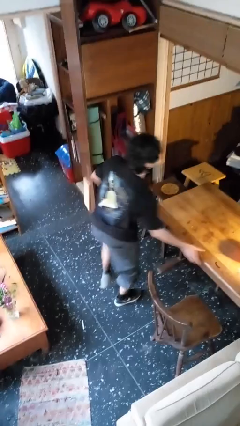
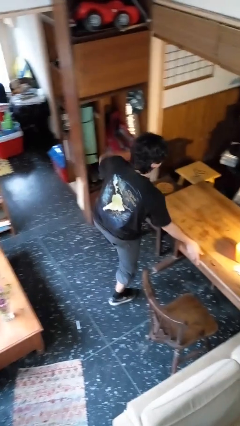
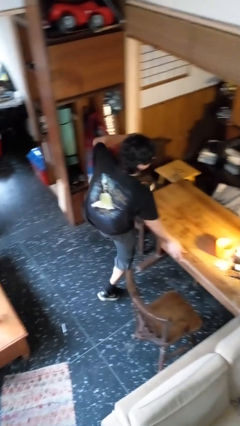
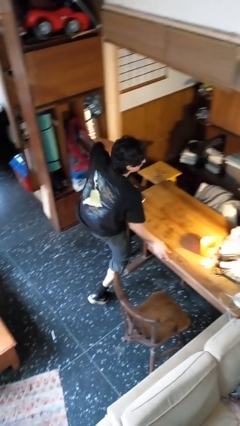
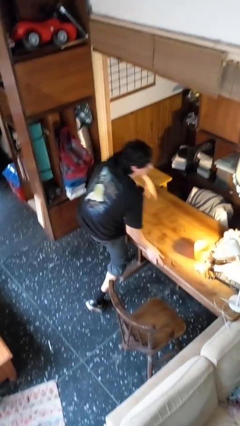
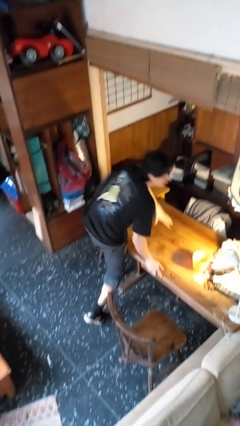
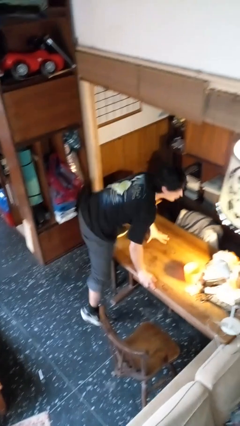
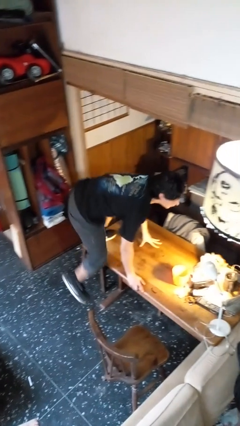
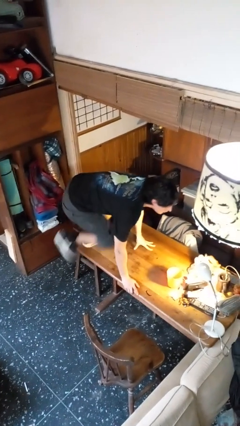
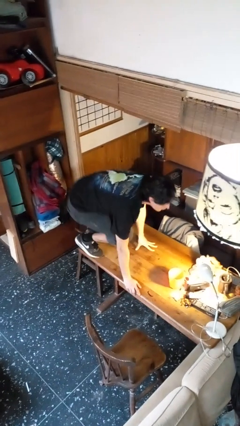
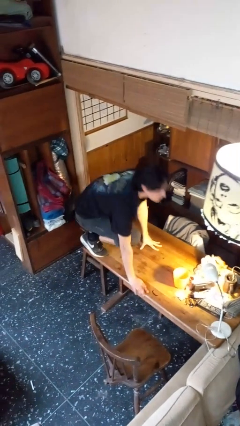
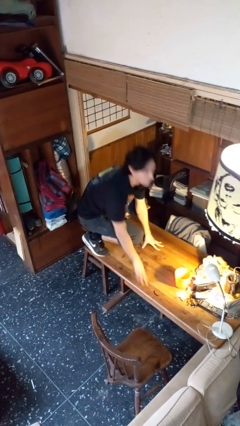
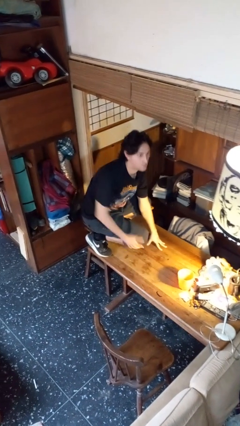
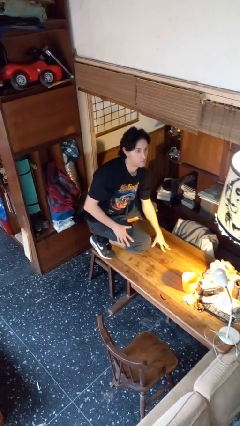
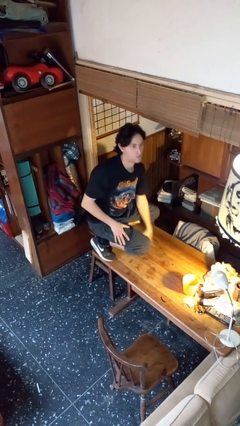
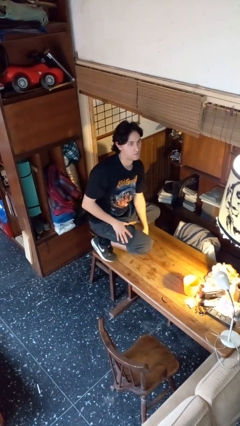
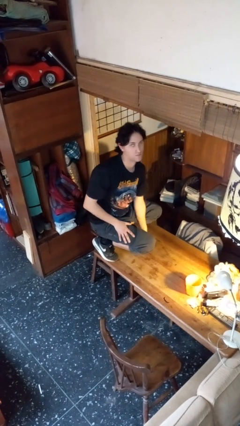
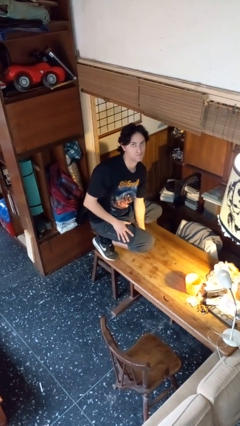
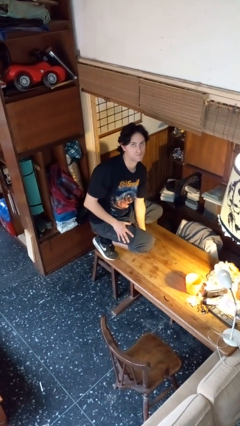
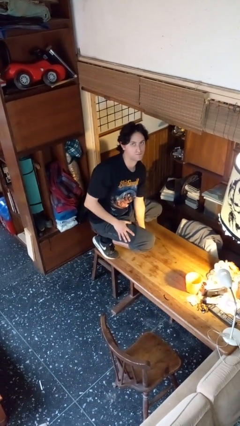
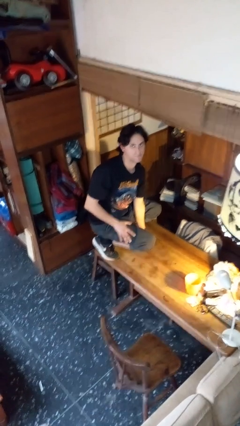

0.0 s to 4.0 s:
person climbs on table

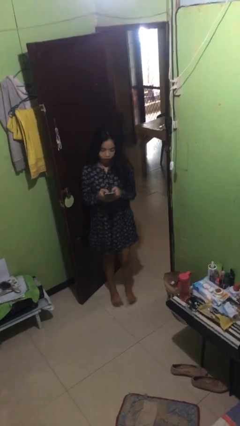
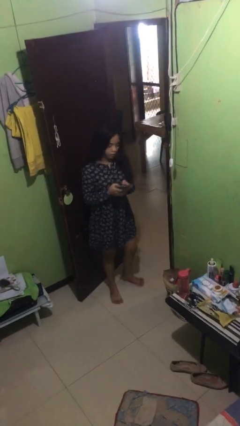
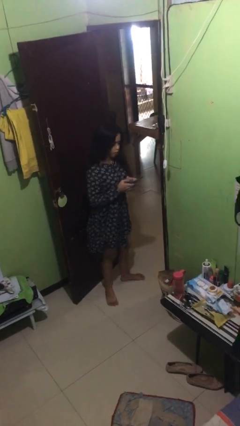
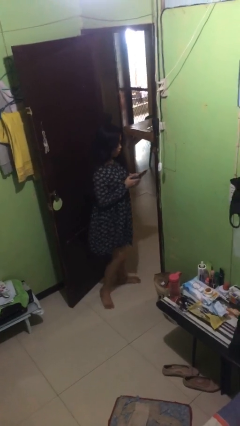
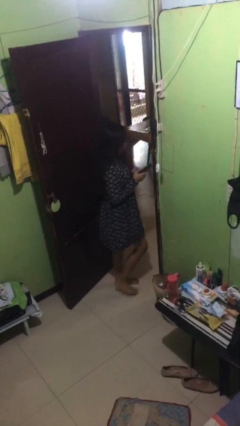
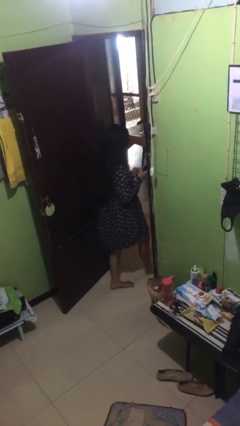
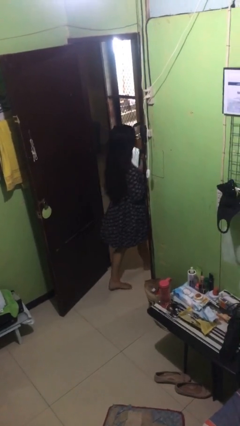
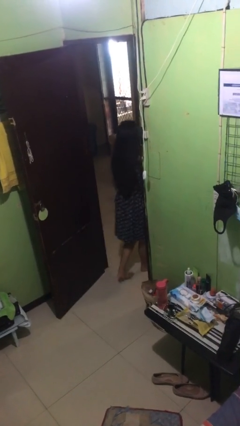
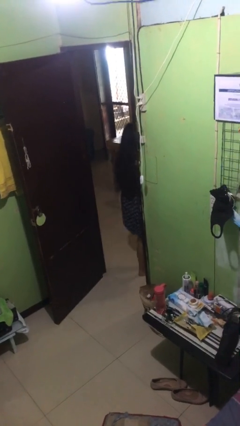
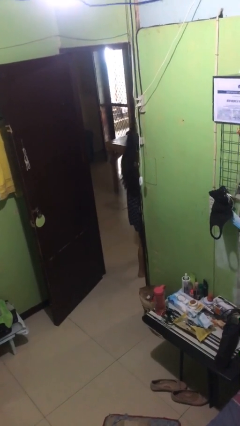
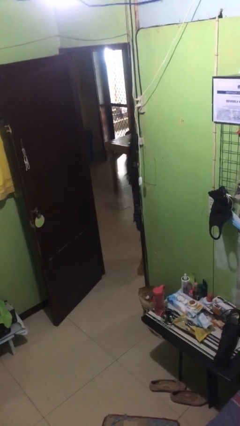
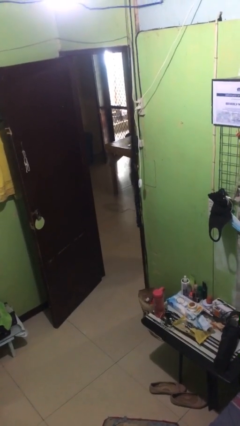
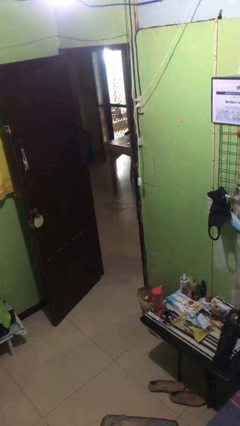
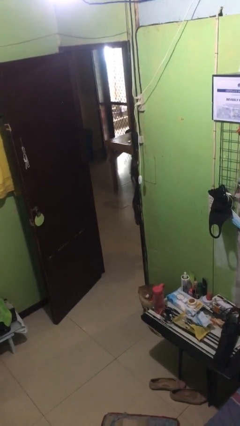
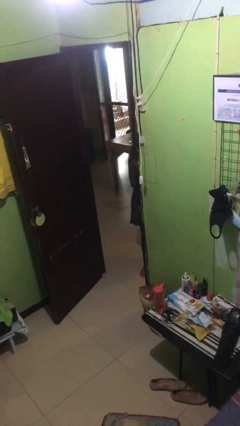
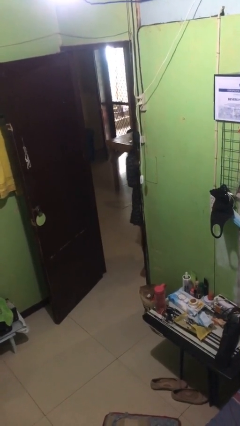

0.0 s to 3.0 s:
person exits scene through structure

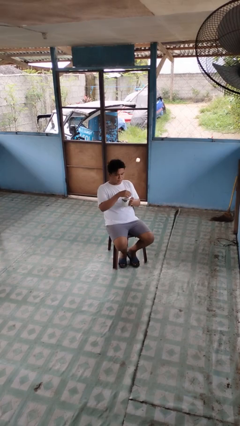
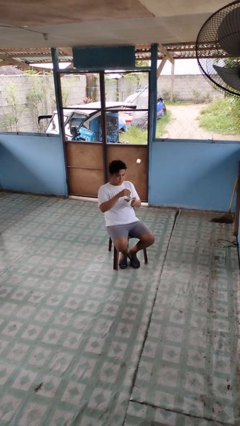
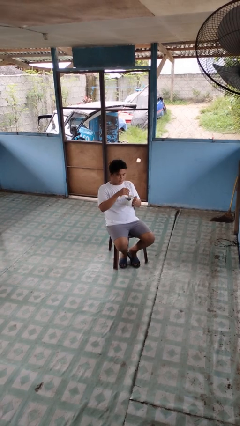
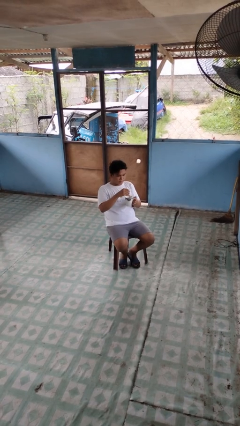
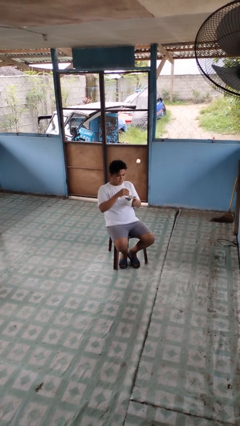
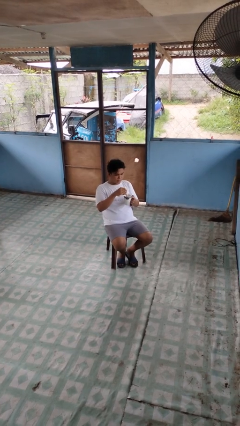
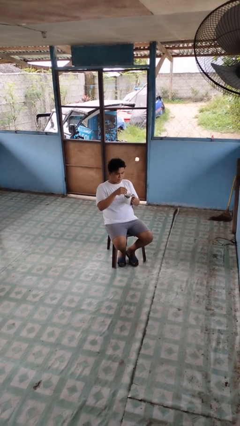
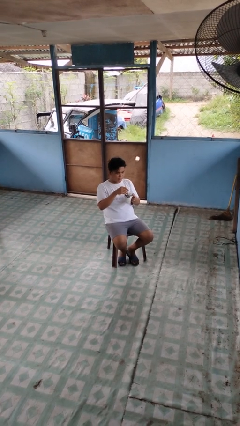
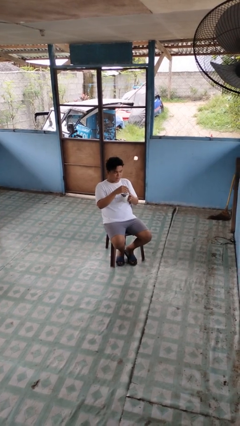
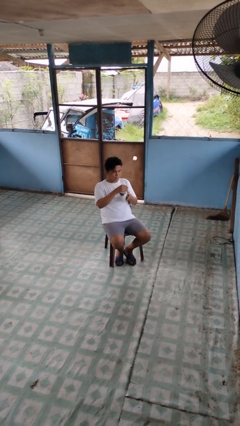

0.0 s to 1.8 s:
person stirs mug

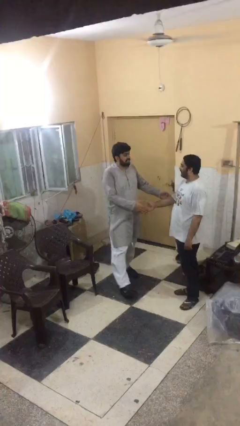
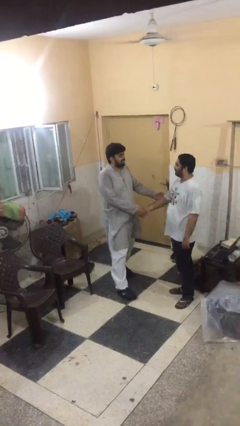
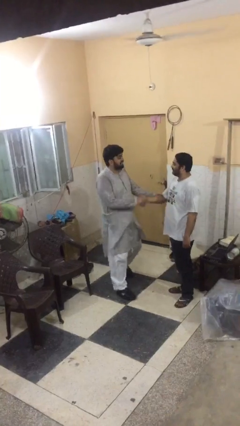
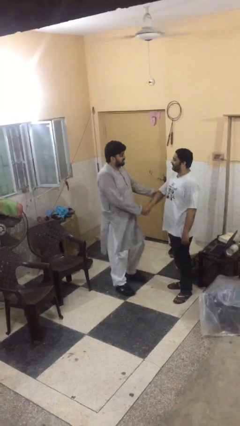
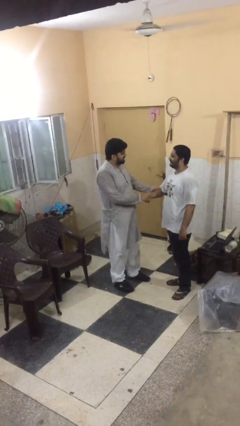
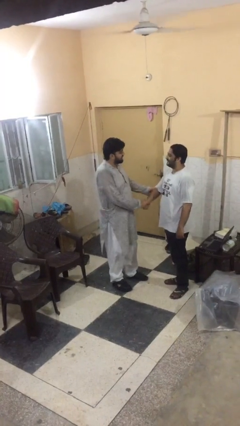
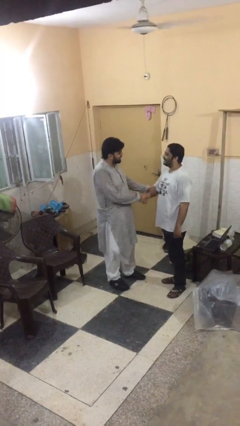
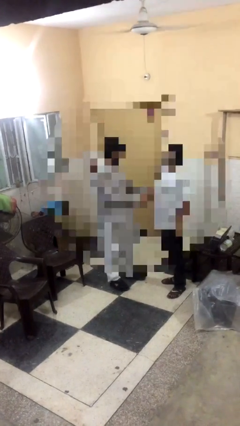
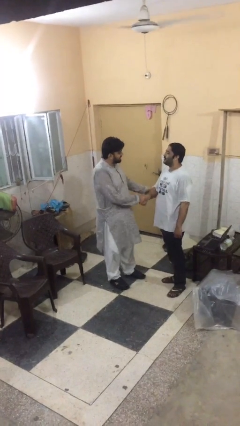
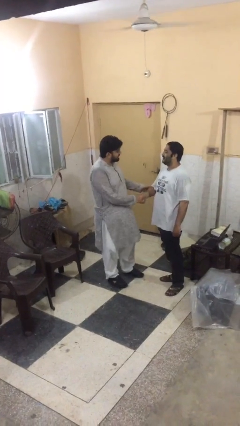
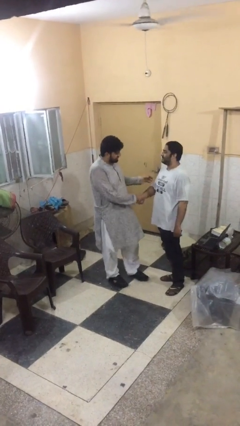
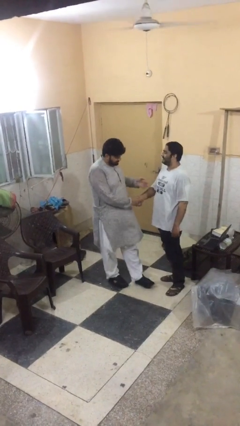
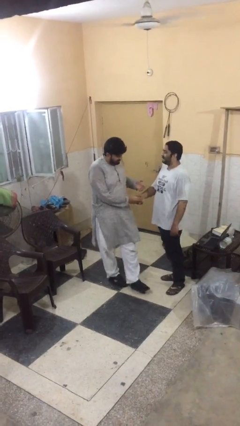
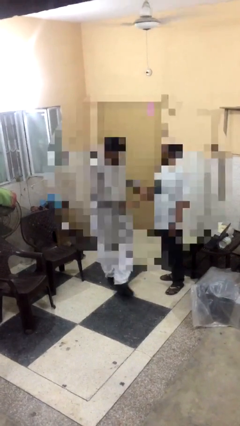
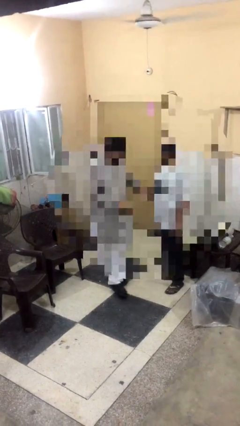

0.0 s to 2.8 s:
person shakes hand

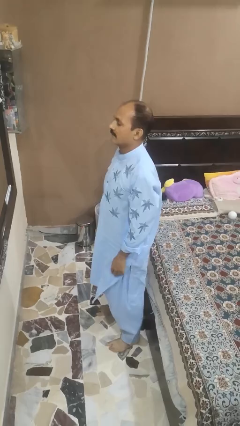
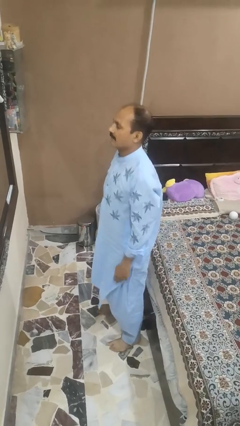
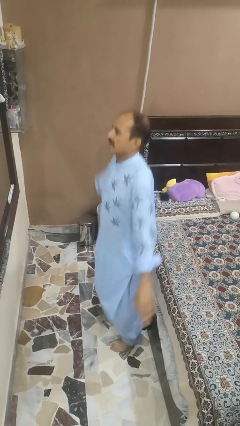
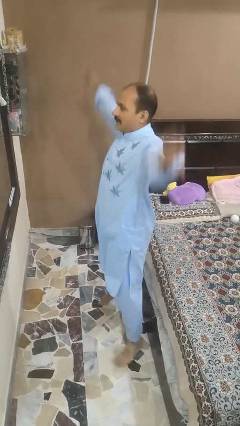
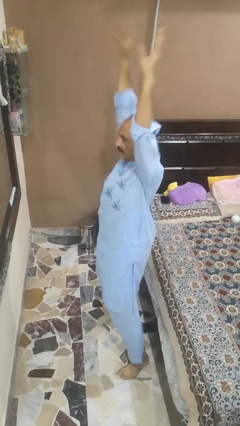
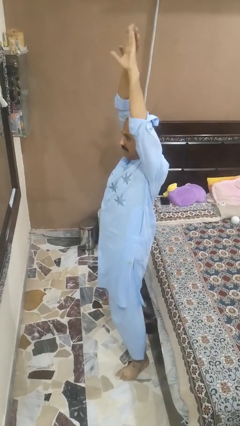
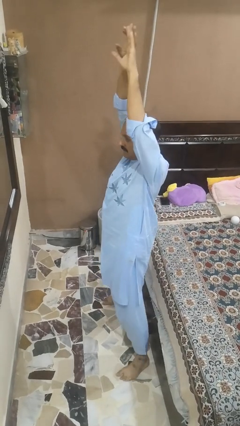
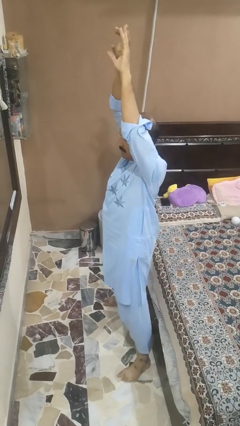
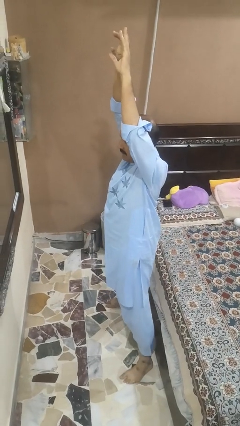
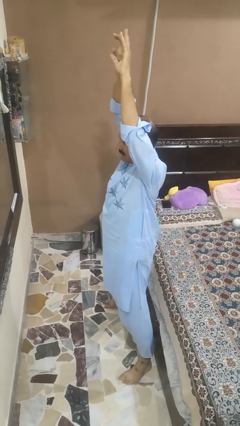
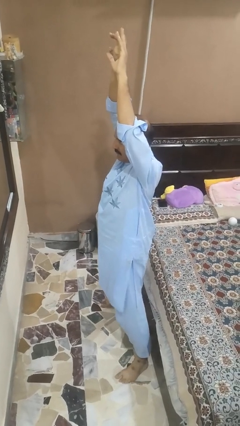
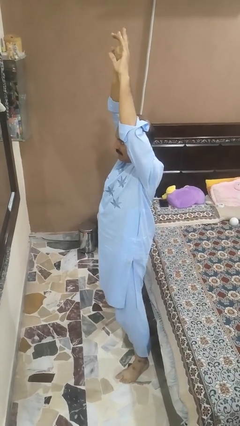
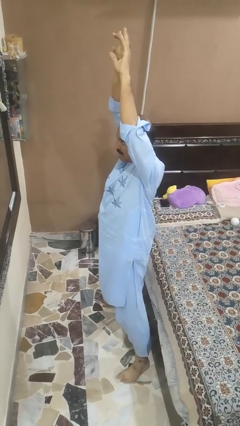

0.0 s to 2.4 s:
person exercises with jumping jacks

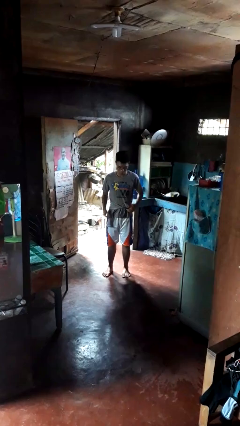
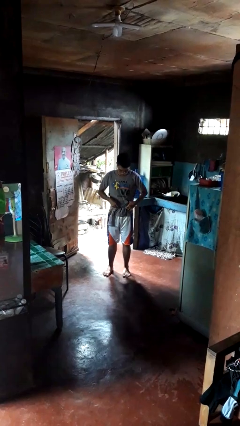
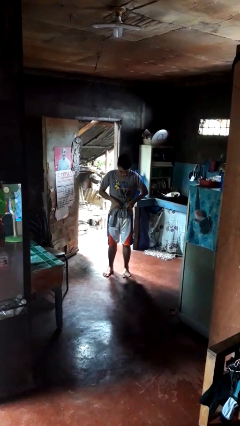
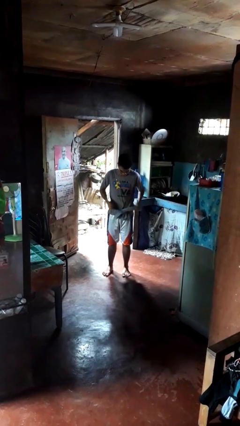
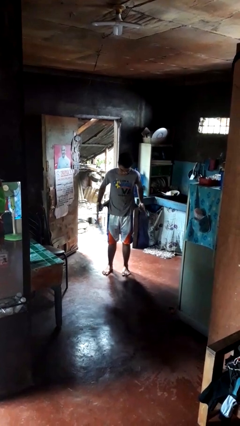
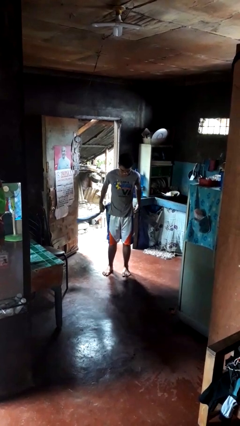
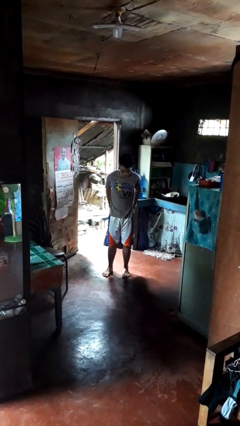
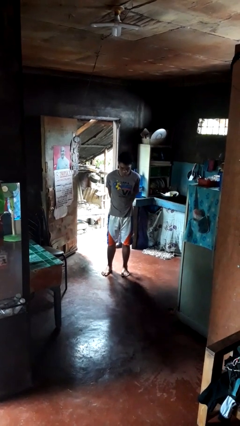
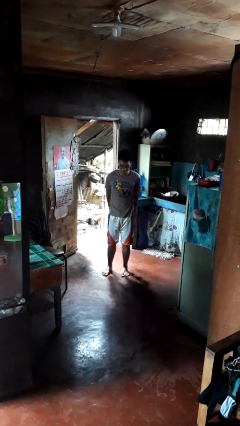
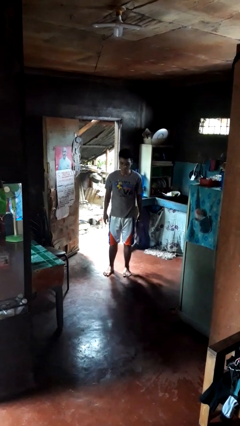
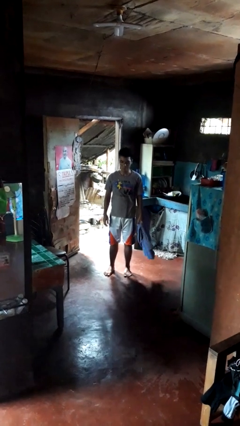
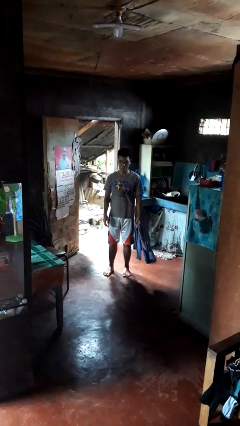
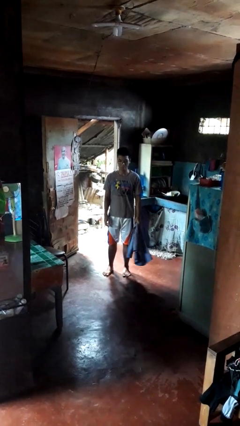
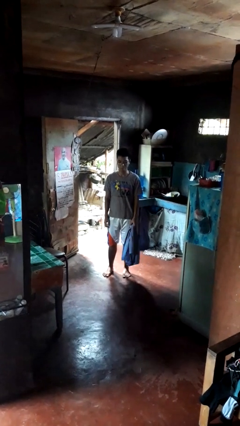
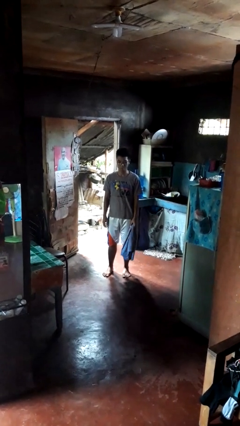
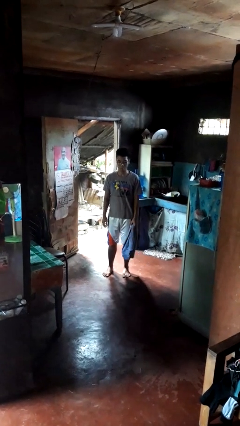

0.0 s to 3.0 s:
person unties jacket around waist

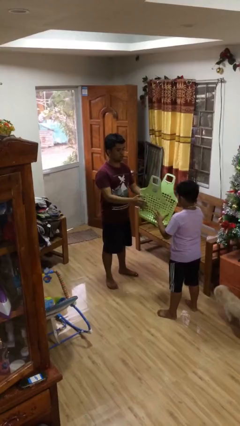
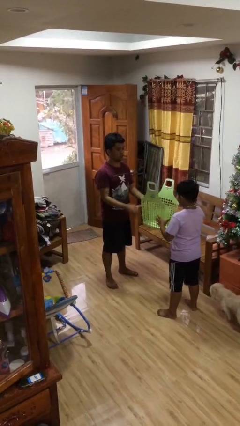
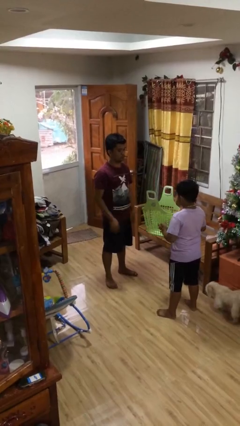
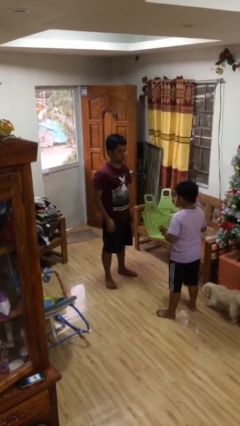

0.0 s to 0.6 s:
person transfers object to person
